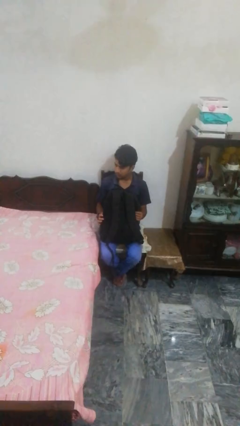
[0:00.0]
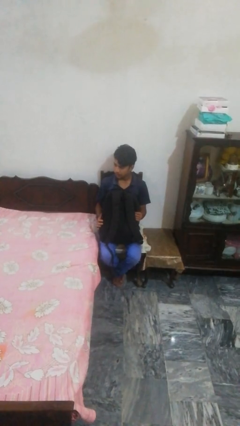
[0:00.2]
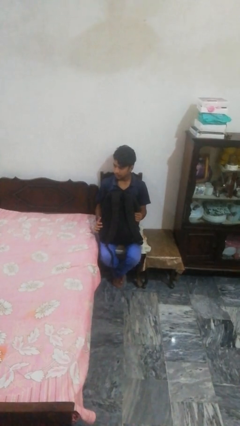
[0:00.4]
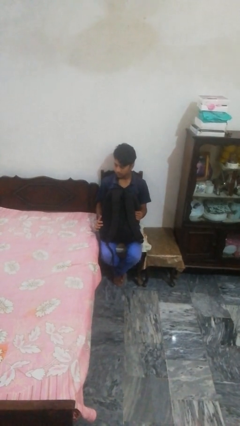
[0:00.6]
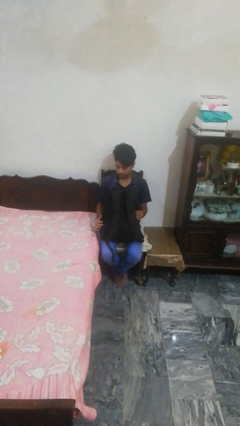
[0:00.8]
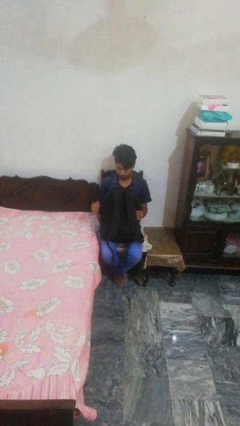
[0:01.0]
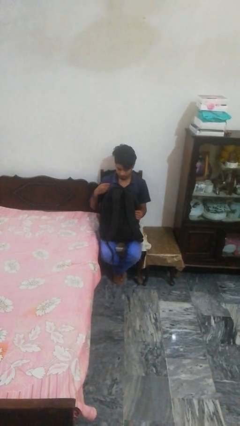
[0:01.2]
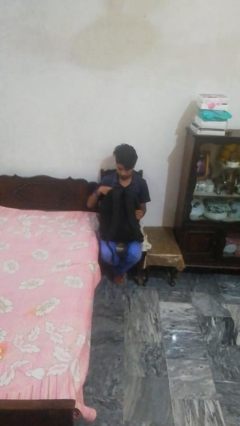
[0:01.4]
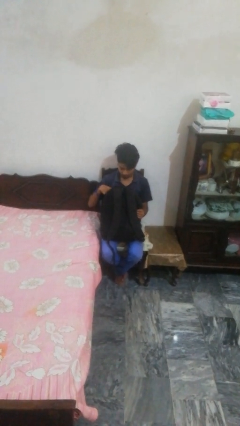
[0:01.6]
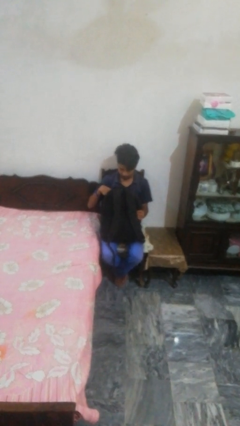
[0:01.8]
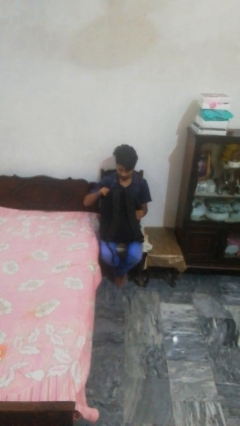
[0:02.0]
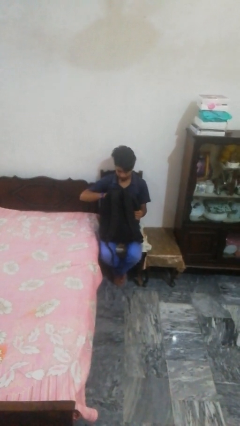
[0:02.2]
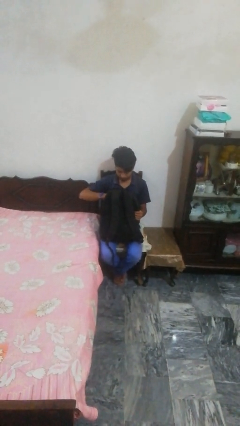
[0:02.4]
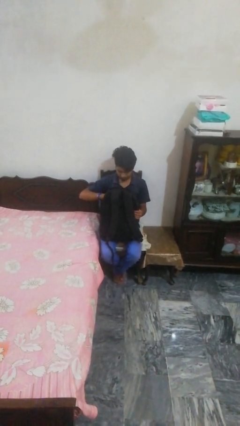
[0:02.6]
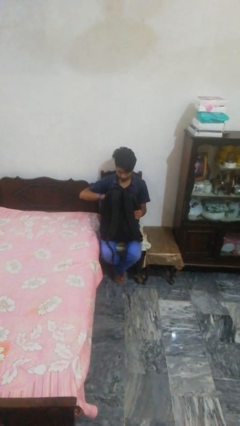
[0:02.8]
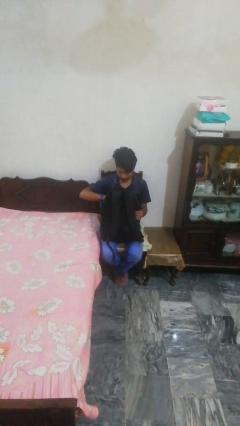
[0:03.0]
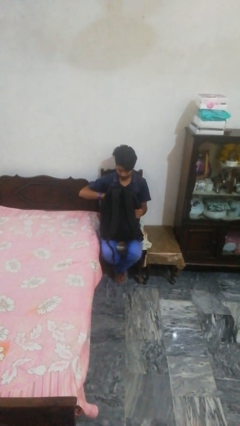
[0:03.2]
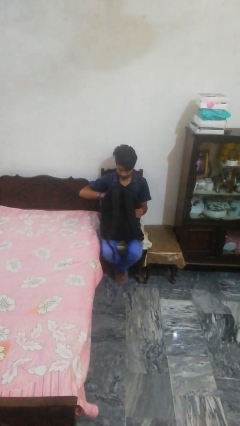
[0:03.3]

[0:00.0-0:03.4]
person searches in backpack

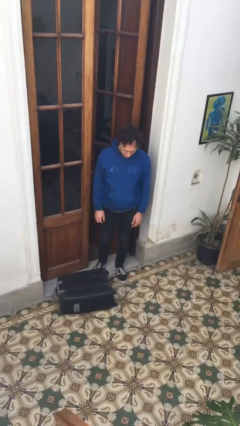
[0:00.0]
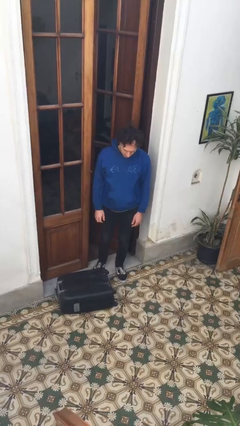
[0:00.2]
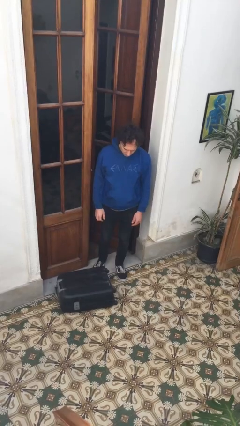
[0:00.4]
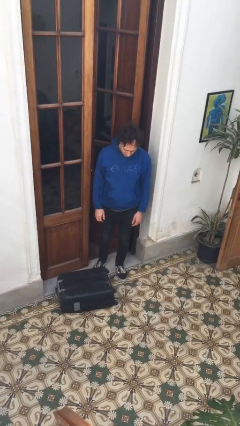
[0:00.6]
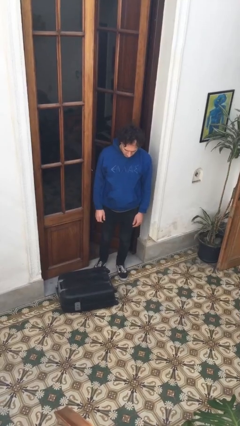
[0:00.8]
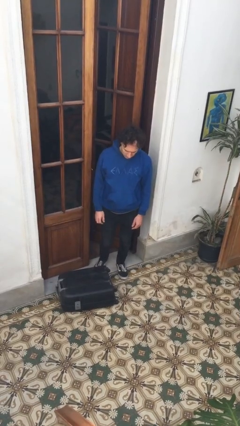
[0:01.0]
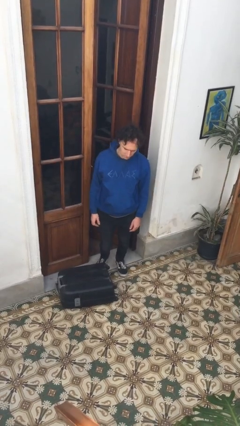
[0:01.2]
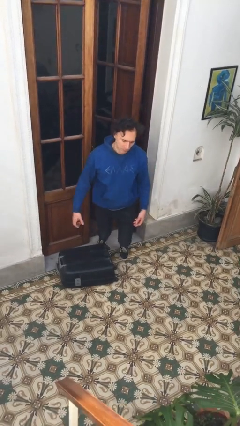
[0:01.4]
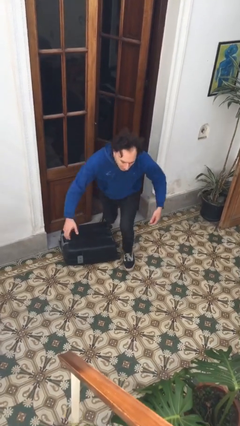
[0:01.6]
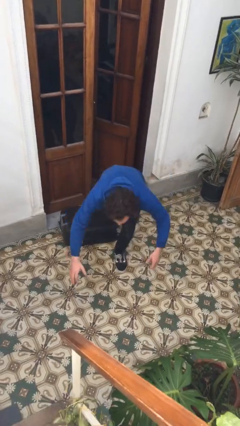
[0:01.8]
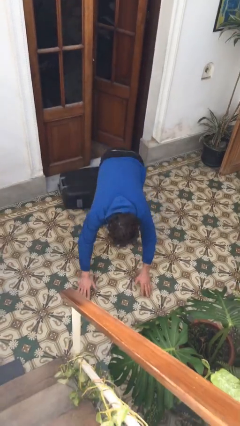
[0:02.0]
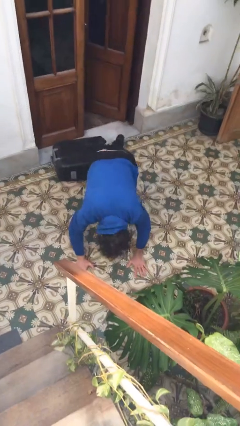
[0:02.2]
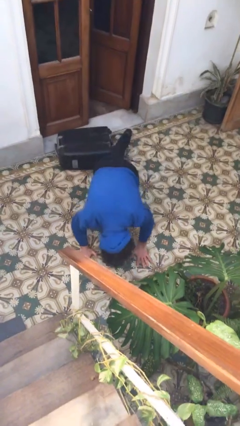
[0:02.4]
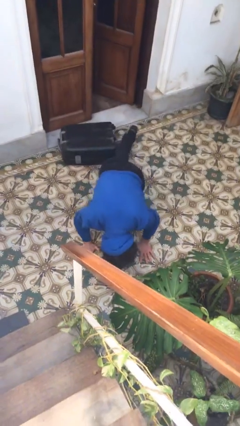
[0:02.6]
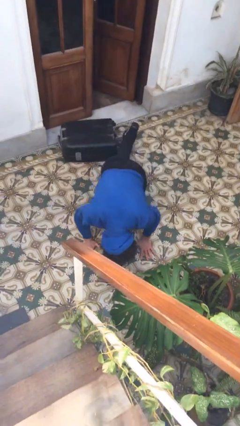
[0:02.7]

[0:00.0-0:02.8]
person trips on object on floor

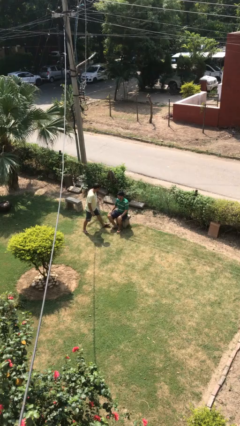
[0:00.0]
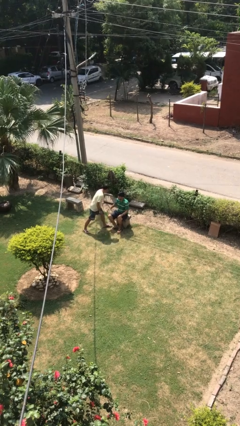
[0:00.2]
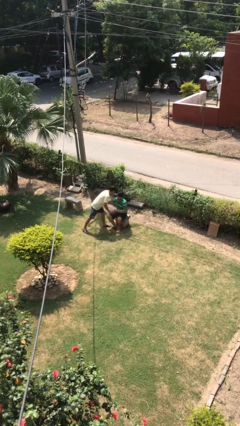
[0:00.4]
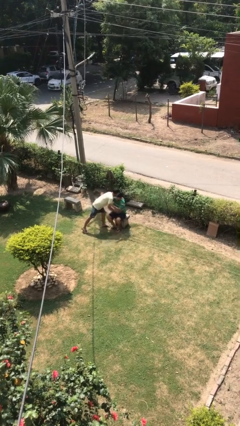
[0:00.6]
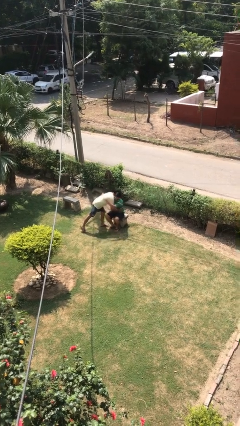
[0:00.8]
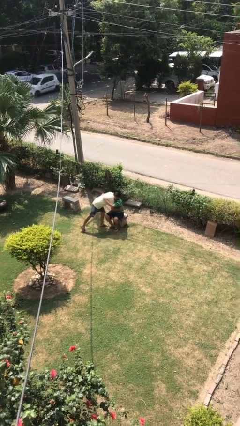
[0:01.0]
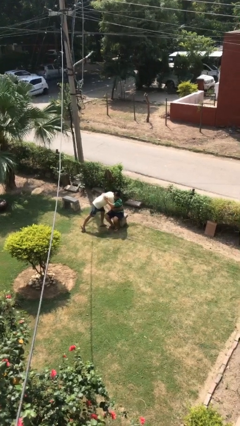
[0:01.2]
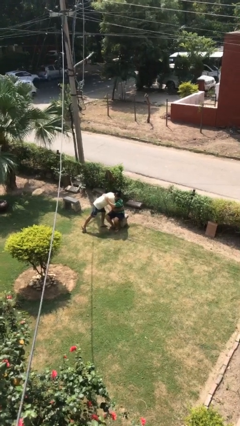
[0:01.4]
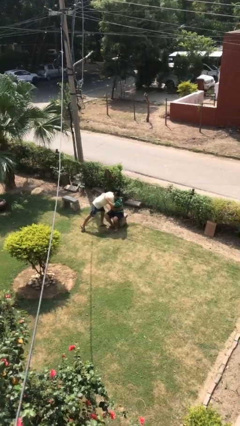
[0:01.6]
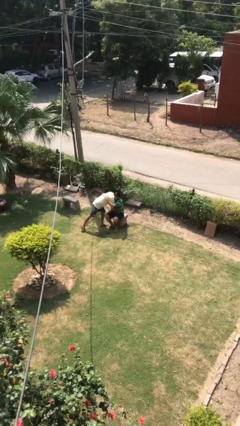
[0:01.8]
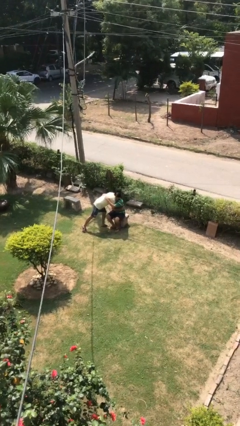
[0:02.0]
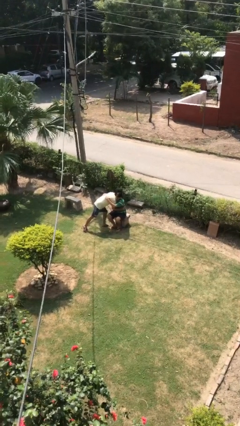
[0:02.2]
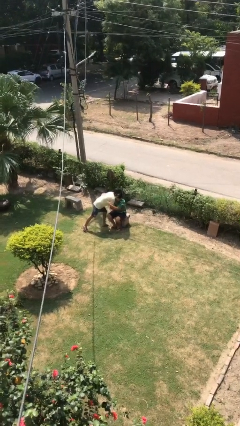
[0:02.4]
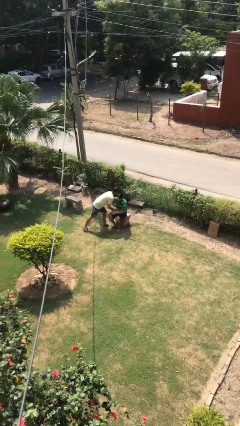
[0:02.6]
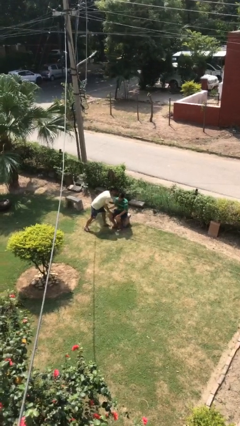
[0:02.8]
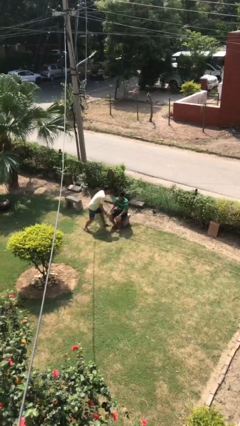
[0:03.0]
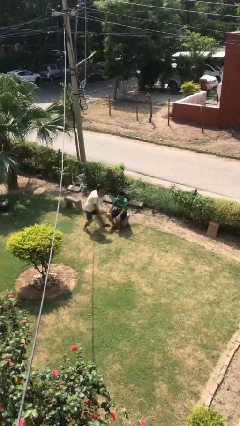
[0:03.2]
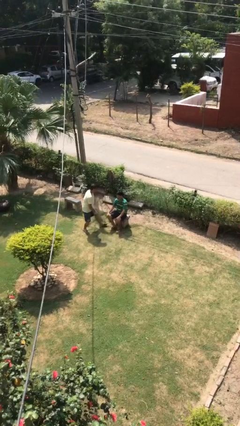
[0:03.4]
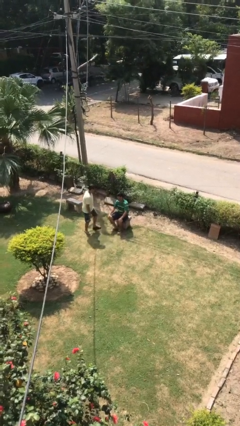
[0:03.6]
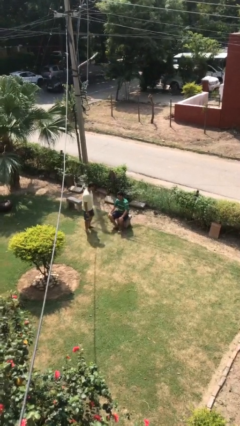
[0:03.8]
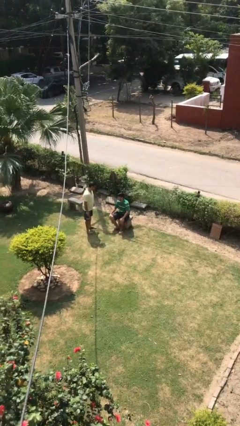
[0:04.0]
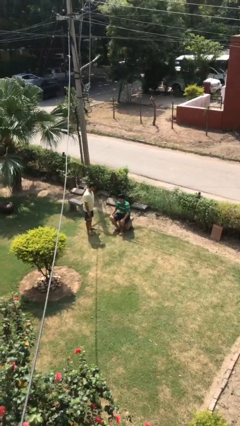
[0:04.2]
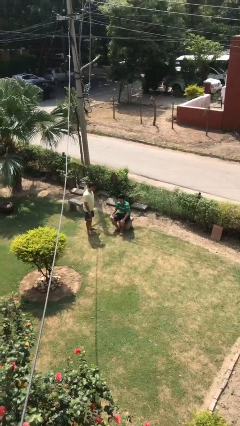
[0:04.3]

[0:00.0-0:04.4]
person embraces person

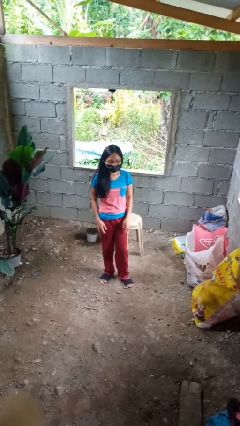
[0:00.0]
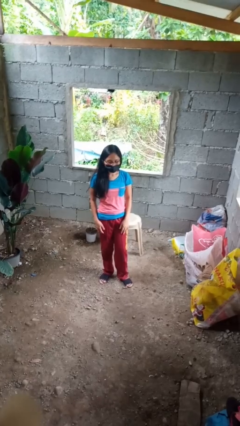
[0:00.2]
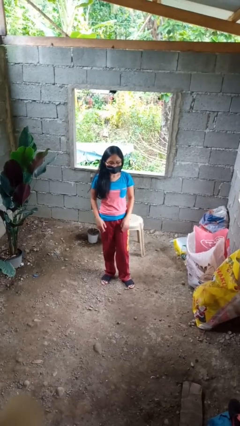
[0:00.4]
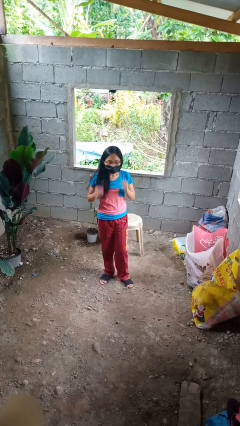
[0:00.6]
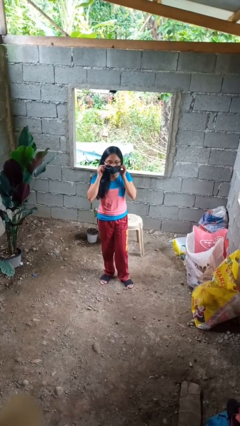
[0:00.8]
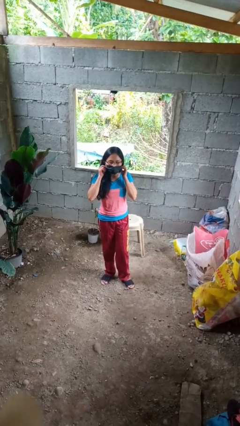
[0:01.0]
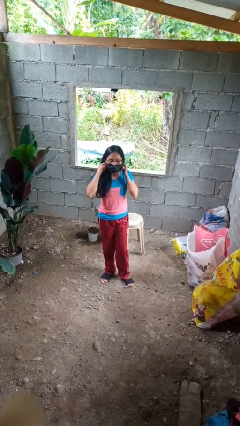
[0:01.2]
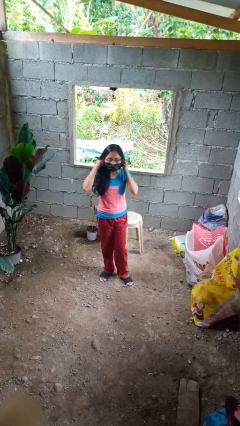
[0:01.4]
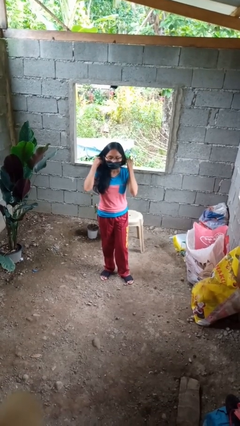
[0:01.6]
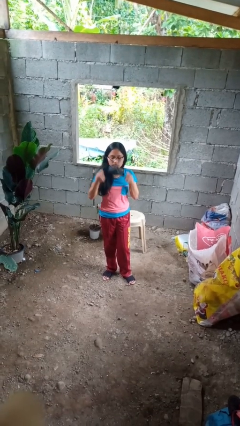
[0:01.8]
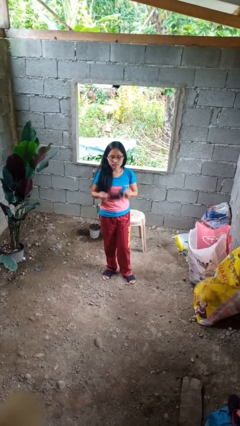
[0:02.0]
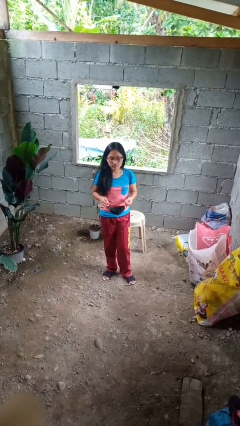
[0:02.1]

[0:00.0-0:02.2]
person takes off facemask

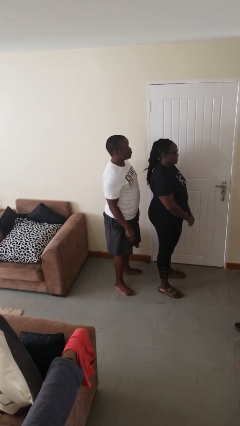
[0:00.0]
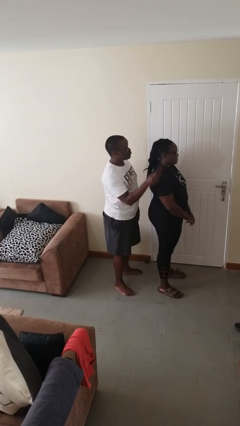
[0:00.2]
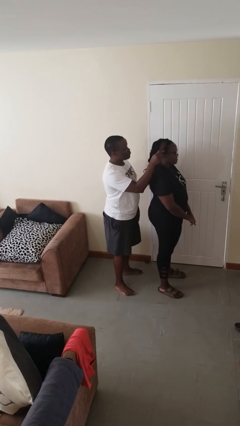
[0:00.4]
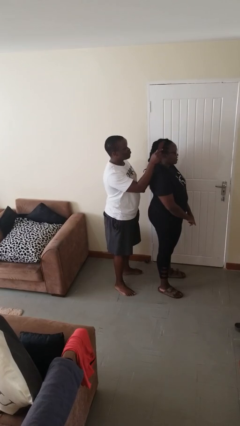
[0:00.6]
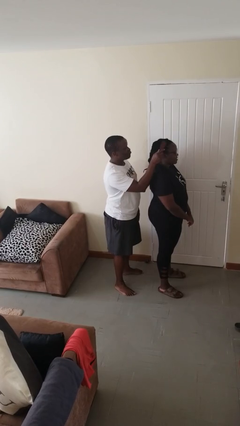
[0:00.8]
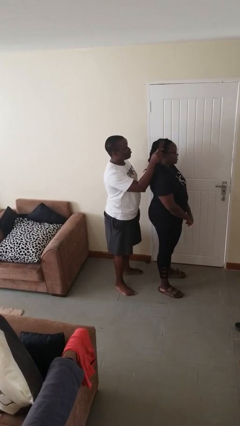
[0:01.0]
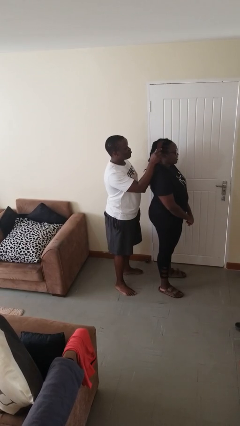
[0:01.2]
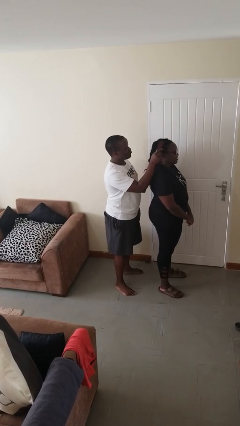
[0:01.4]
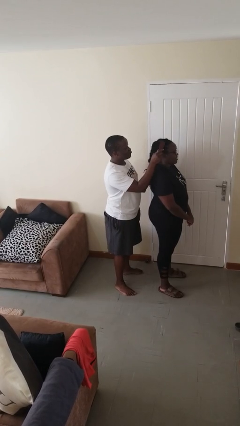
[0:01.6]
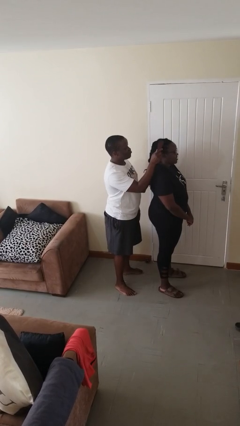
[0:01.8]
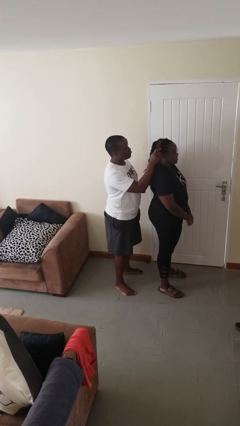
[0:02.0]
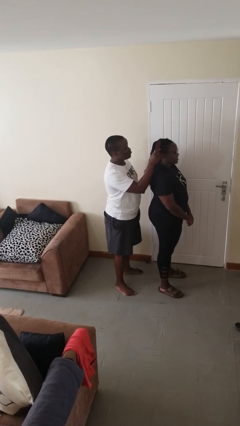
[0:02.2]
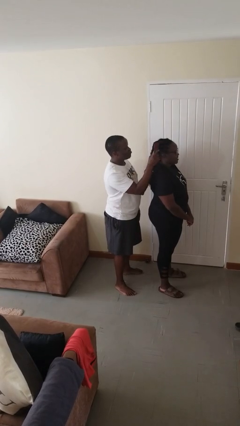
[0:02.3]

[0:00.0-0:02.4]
person brushes hair of person

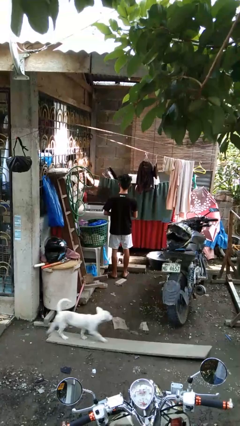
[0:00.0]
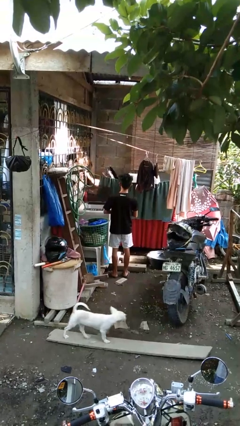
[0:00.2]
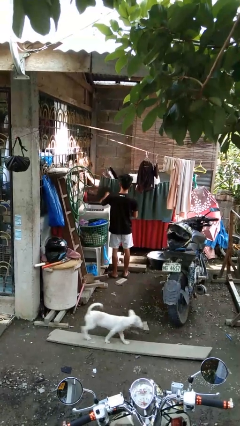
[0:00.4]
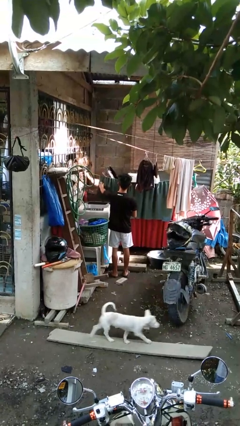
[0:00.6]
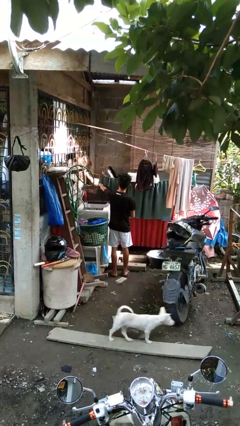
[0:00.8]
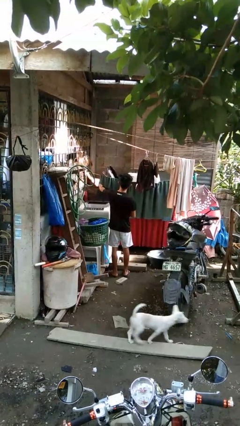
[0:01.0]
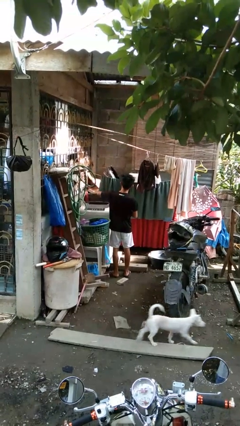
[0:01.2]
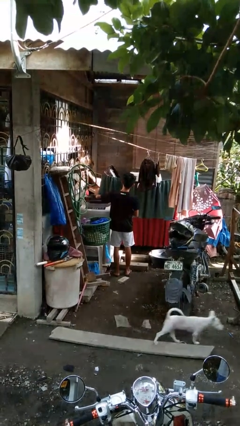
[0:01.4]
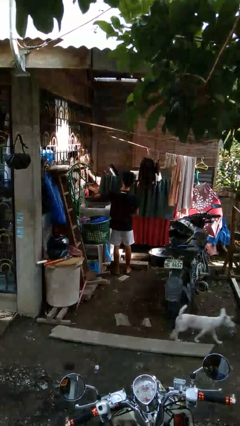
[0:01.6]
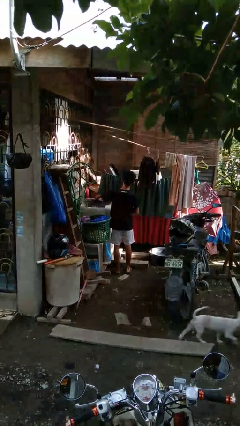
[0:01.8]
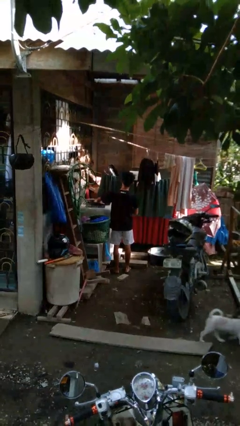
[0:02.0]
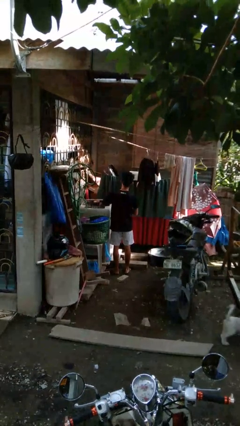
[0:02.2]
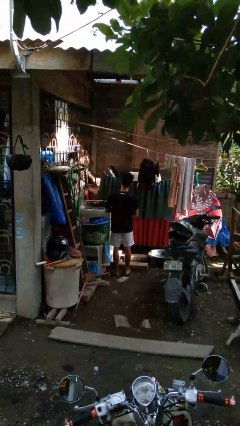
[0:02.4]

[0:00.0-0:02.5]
person closes clothes washer
